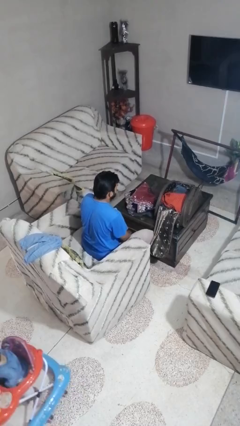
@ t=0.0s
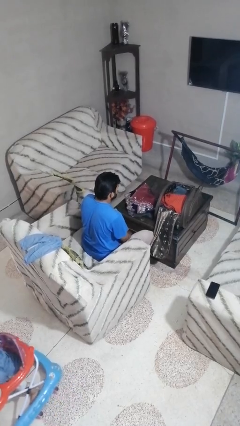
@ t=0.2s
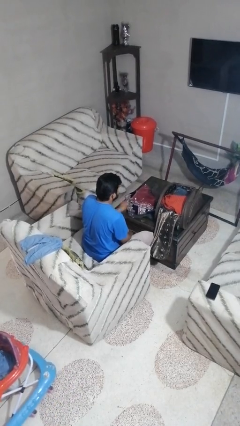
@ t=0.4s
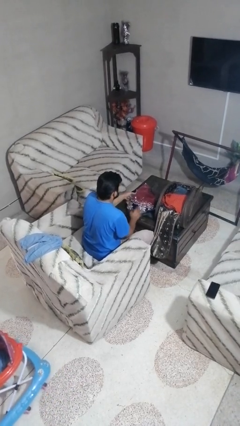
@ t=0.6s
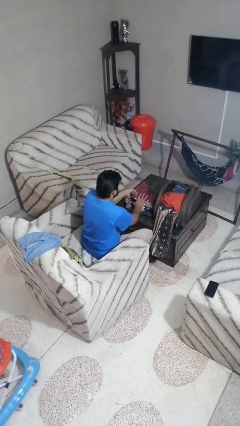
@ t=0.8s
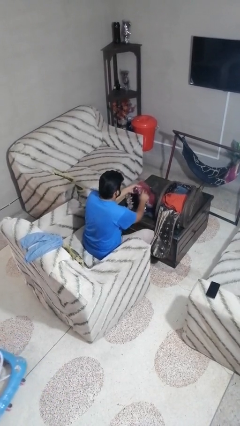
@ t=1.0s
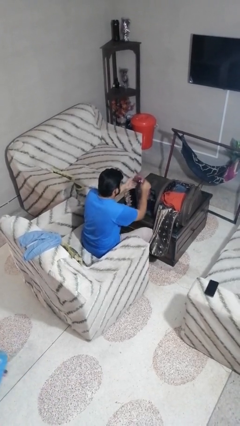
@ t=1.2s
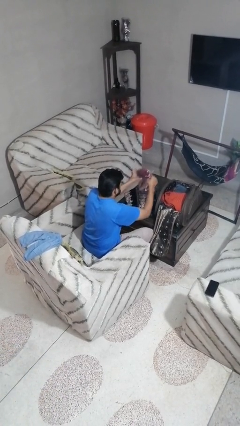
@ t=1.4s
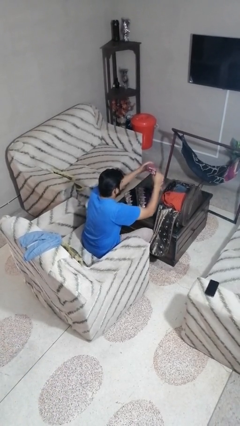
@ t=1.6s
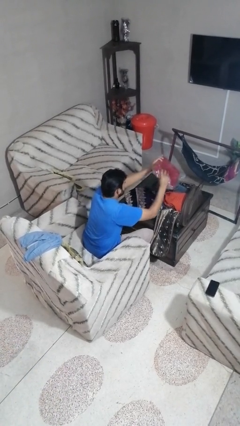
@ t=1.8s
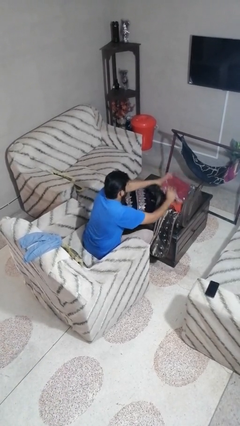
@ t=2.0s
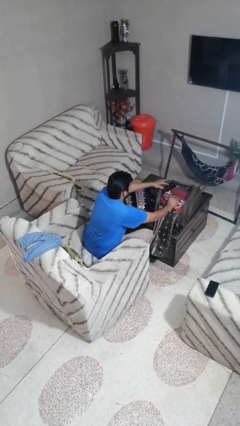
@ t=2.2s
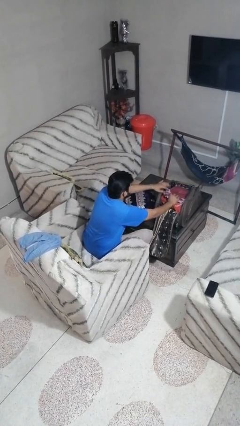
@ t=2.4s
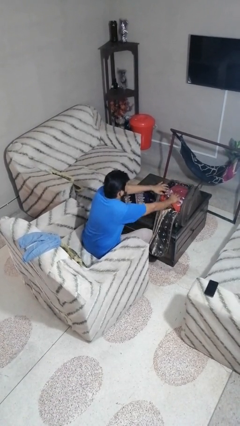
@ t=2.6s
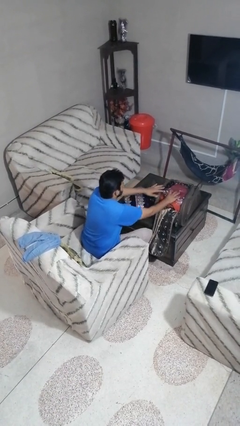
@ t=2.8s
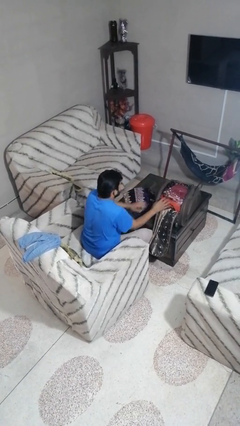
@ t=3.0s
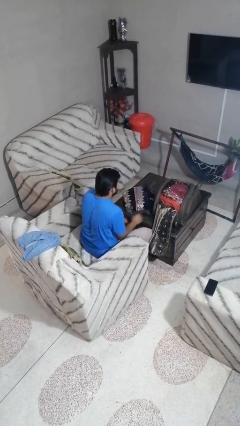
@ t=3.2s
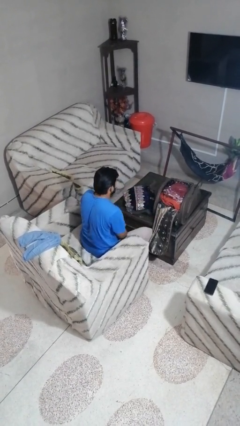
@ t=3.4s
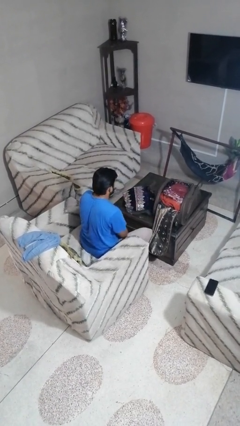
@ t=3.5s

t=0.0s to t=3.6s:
person loads clothes into suitcase

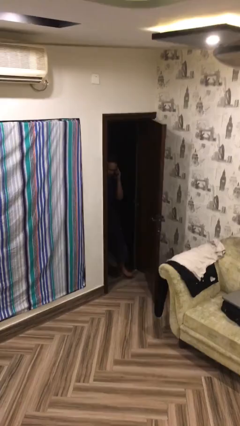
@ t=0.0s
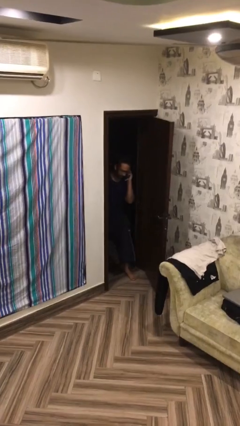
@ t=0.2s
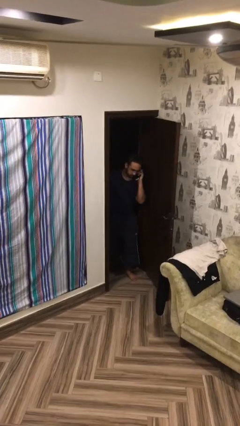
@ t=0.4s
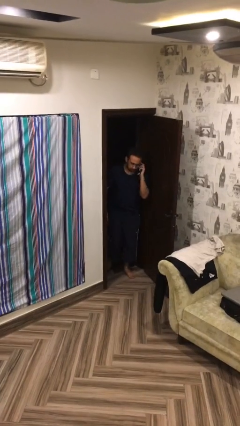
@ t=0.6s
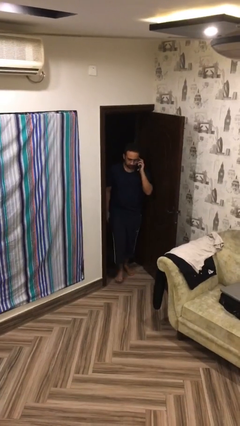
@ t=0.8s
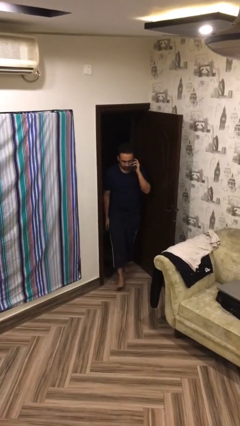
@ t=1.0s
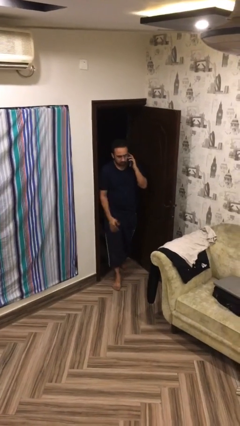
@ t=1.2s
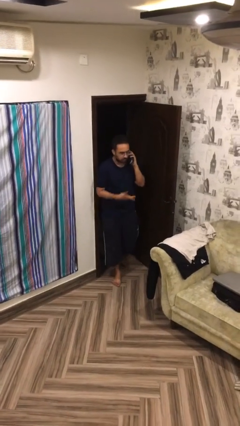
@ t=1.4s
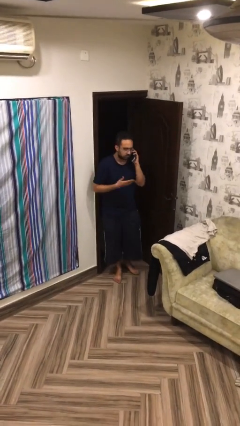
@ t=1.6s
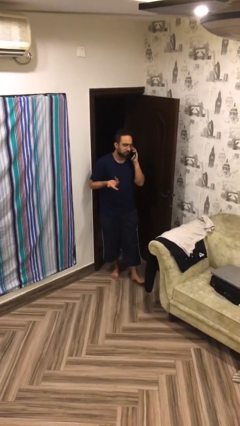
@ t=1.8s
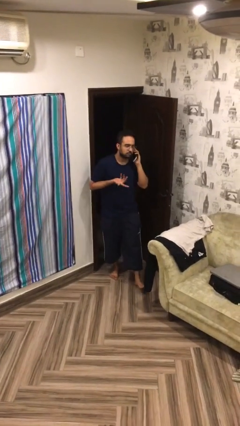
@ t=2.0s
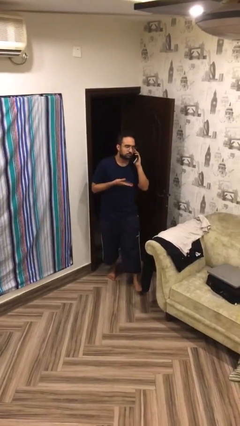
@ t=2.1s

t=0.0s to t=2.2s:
person enters scene through structure

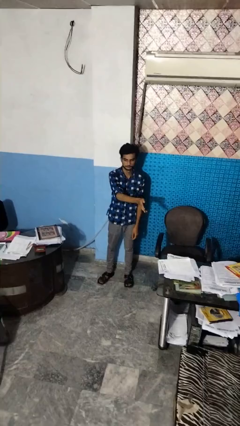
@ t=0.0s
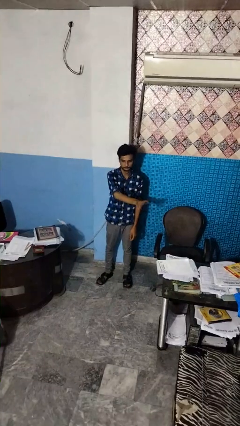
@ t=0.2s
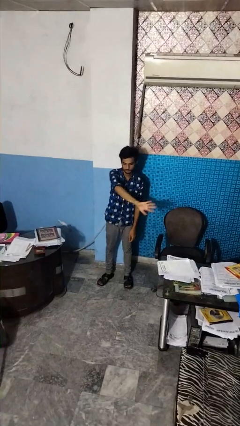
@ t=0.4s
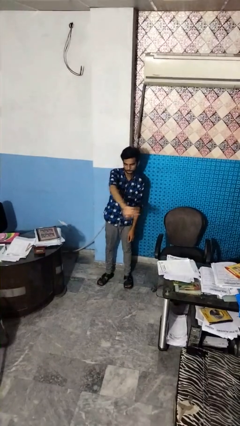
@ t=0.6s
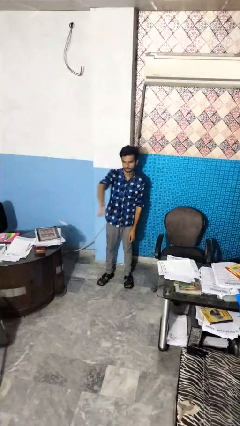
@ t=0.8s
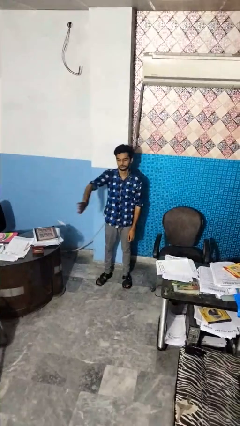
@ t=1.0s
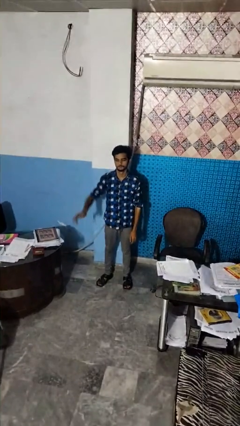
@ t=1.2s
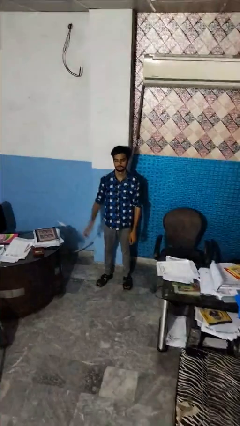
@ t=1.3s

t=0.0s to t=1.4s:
person gestures swipe right

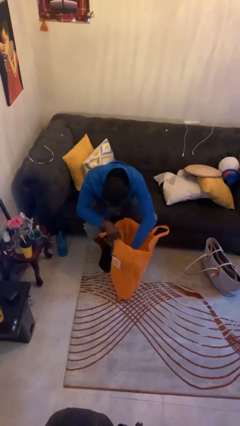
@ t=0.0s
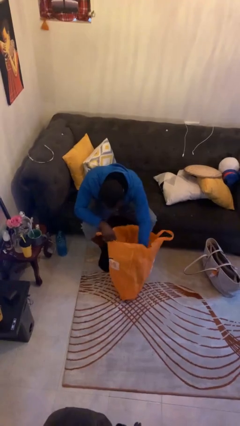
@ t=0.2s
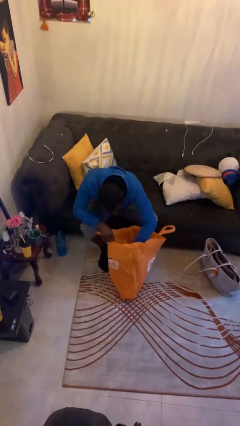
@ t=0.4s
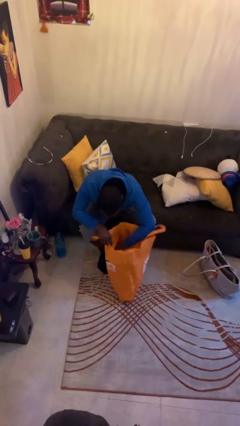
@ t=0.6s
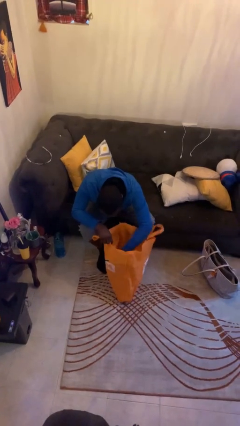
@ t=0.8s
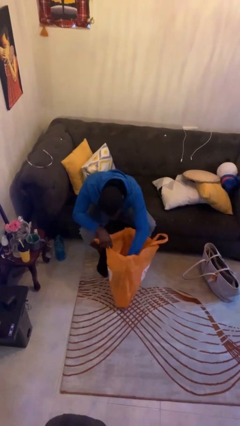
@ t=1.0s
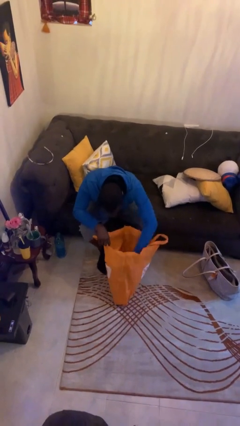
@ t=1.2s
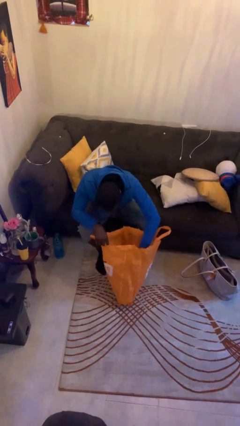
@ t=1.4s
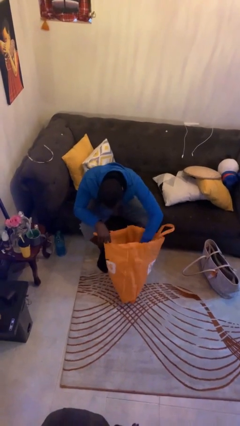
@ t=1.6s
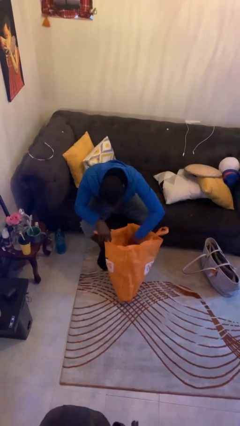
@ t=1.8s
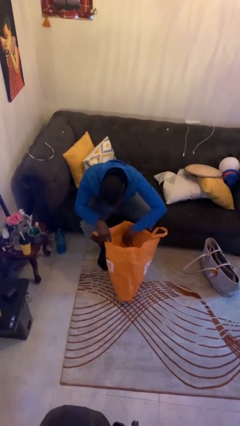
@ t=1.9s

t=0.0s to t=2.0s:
person searches in bag

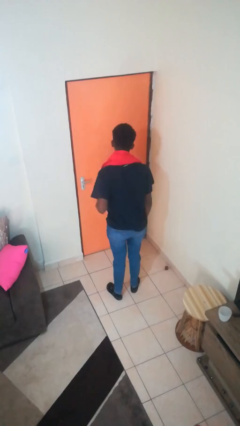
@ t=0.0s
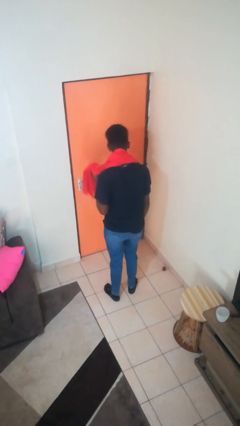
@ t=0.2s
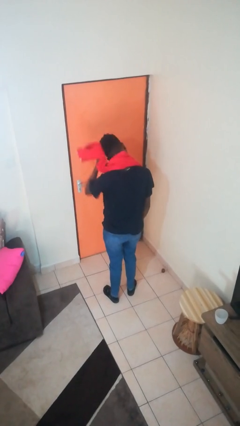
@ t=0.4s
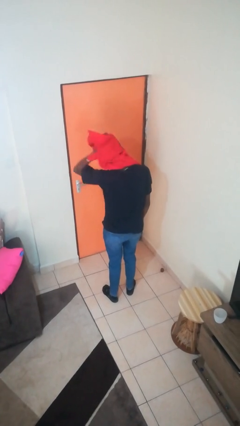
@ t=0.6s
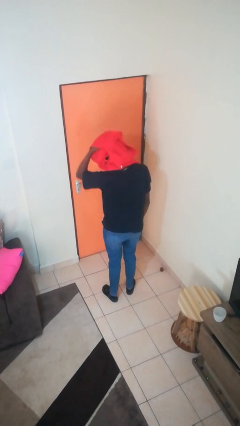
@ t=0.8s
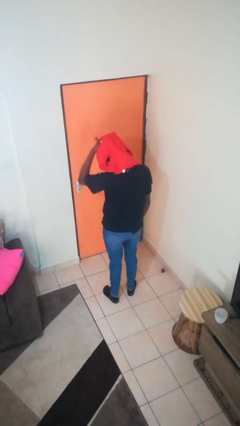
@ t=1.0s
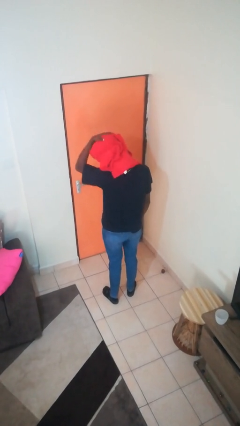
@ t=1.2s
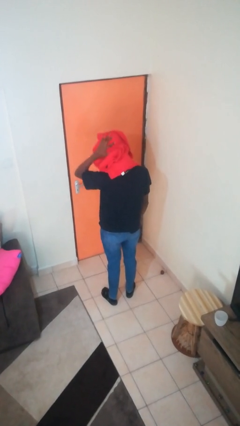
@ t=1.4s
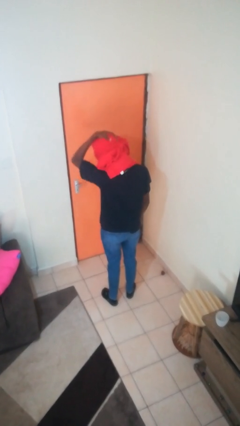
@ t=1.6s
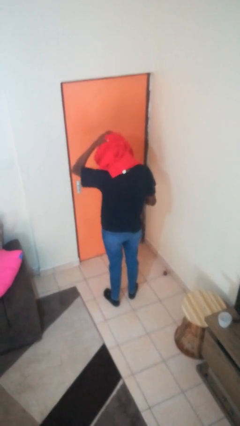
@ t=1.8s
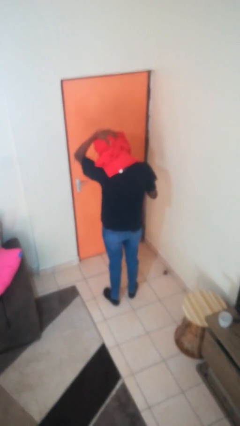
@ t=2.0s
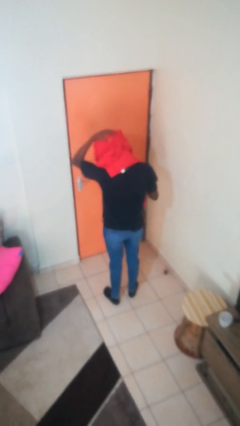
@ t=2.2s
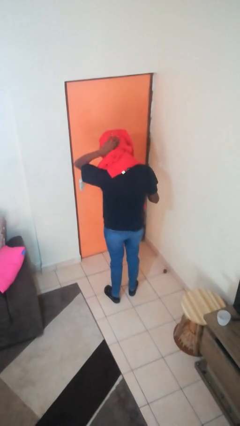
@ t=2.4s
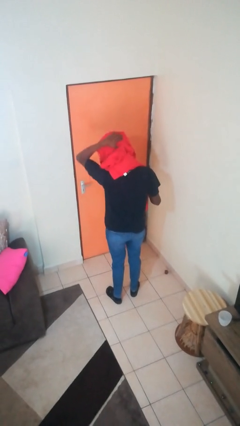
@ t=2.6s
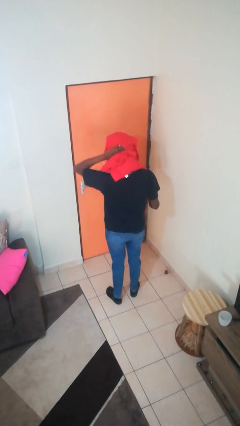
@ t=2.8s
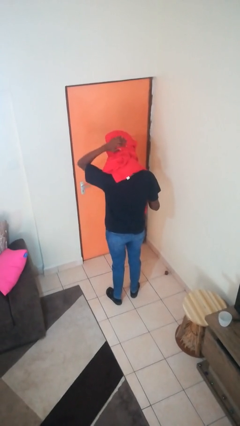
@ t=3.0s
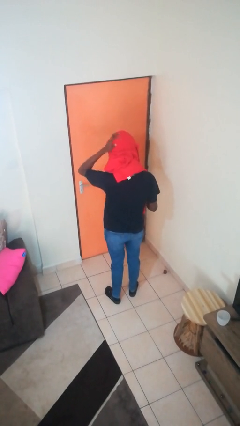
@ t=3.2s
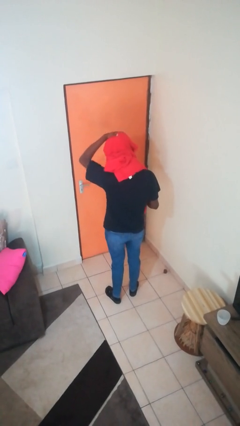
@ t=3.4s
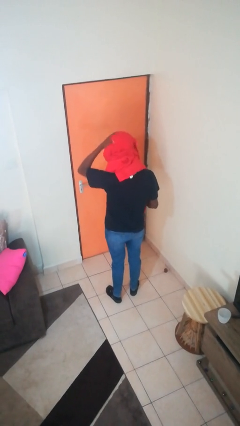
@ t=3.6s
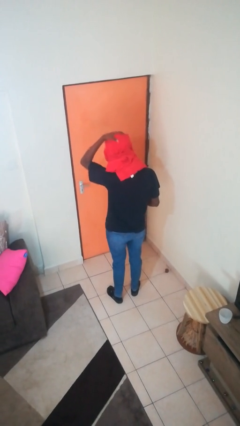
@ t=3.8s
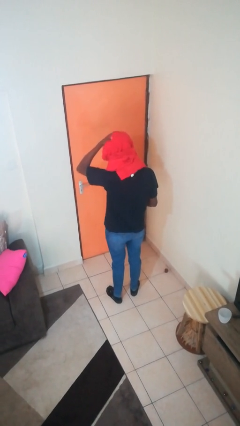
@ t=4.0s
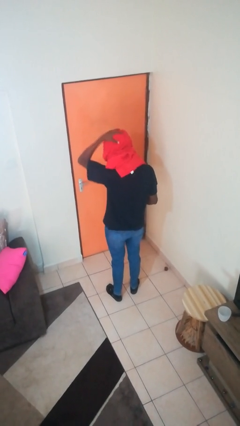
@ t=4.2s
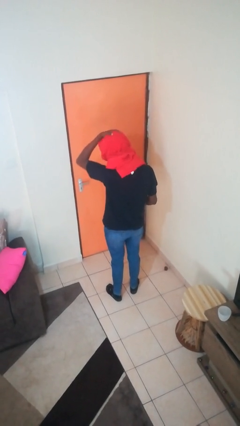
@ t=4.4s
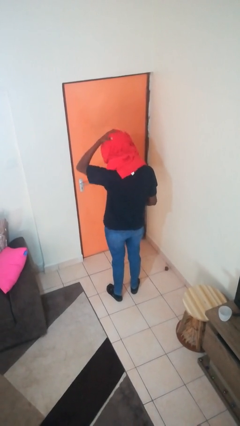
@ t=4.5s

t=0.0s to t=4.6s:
person dries hair with towel

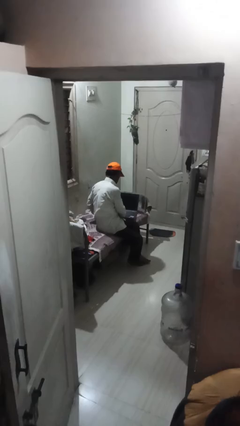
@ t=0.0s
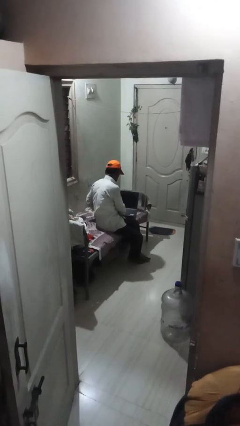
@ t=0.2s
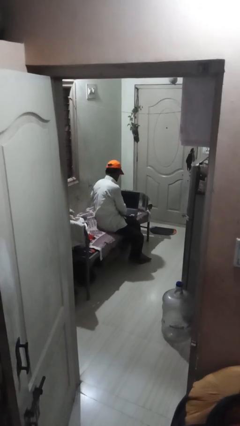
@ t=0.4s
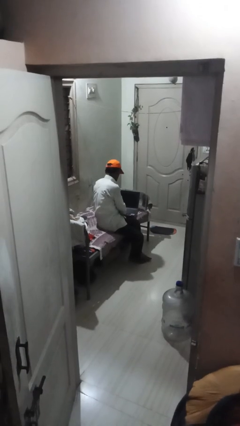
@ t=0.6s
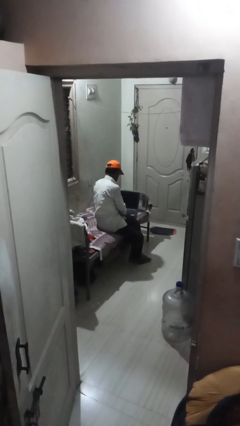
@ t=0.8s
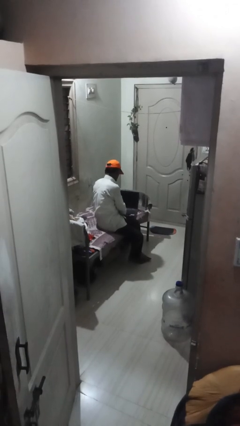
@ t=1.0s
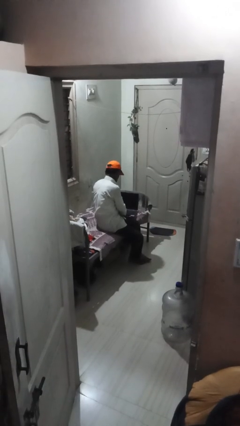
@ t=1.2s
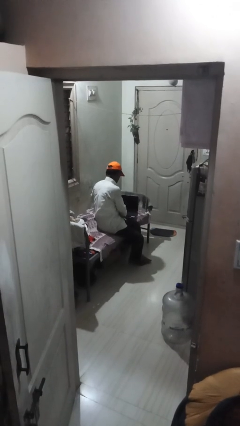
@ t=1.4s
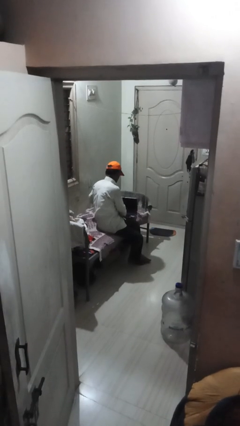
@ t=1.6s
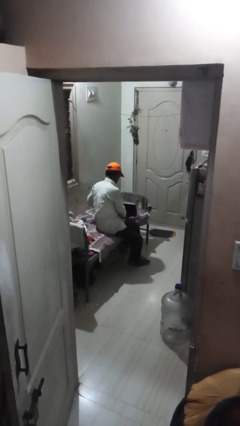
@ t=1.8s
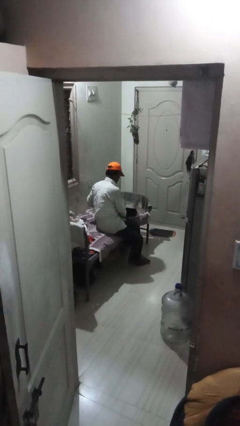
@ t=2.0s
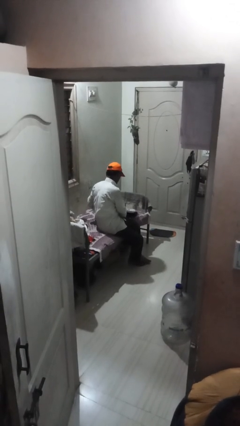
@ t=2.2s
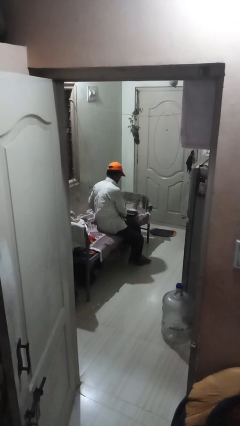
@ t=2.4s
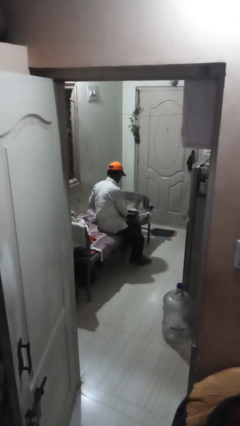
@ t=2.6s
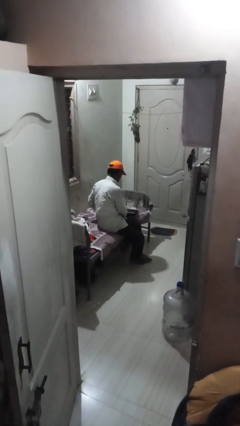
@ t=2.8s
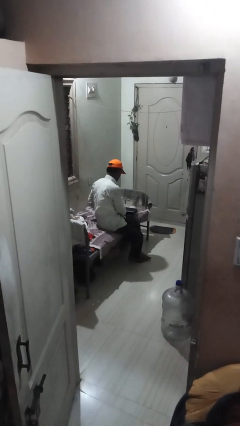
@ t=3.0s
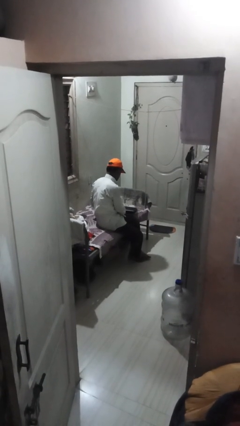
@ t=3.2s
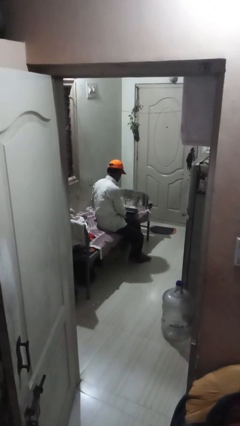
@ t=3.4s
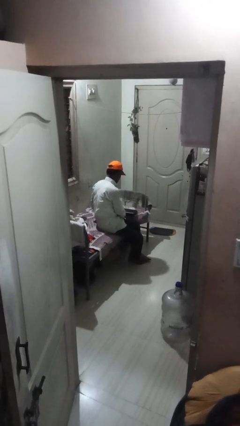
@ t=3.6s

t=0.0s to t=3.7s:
person closes laptop
